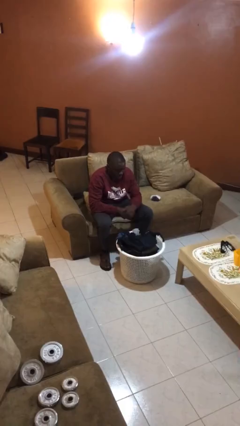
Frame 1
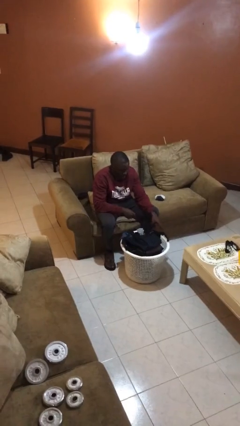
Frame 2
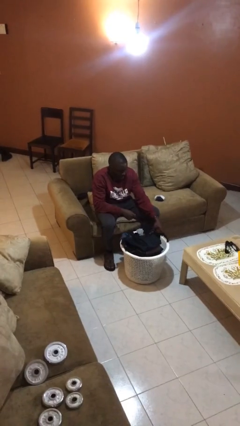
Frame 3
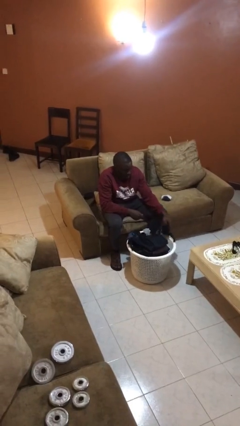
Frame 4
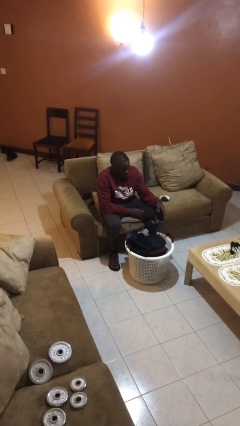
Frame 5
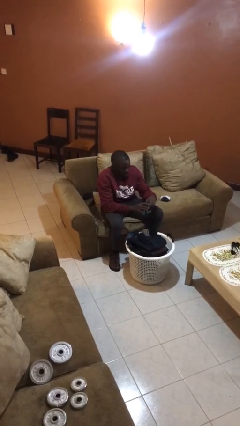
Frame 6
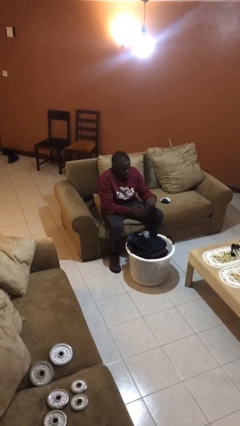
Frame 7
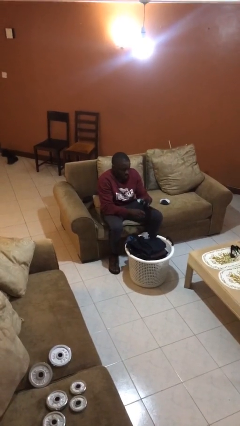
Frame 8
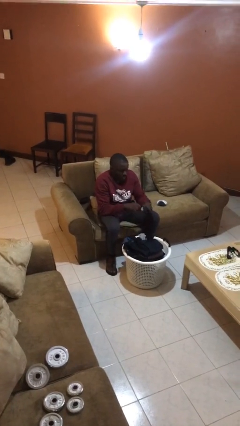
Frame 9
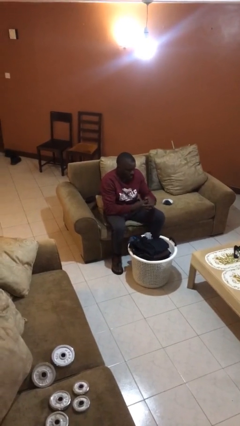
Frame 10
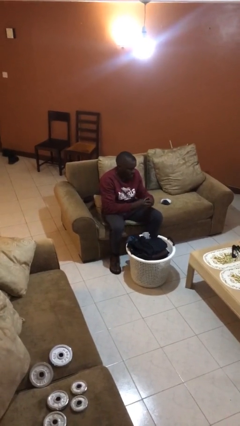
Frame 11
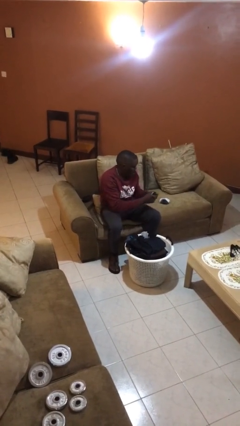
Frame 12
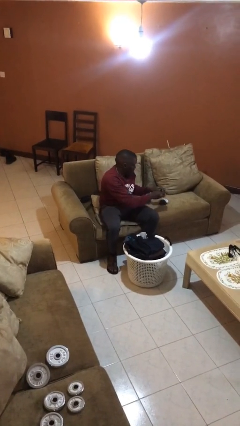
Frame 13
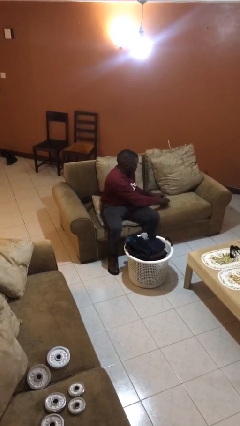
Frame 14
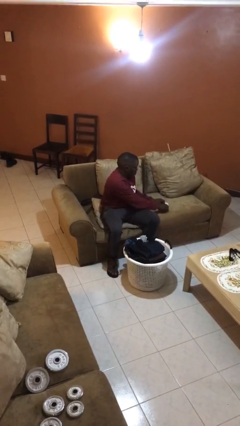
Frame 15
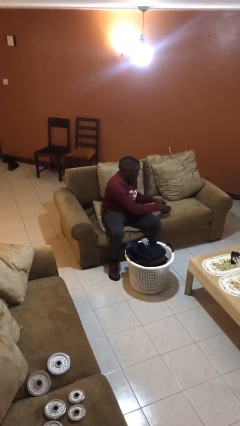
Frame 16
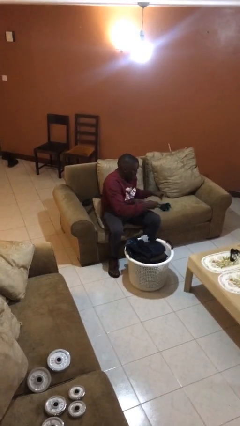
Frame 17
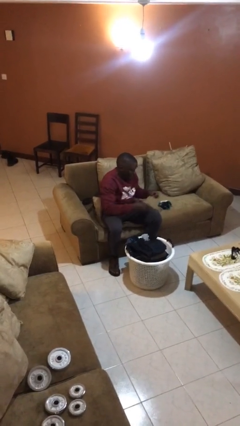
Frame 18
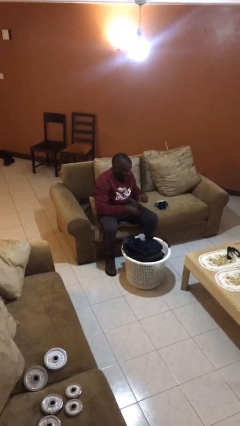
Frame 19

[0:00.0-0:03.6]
person folds socks

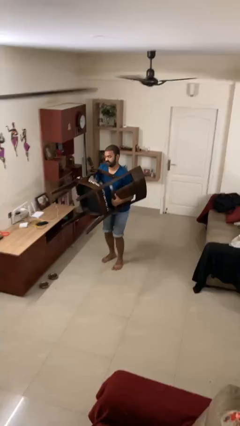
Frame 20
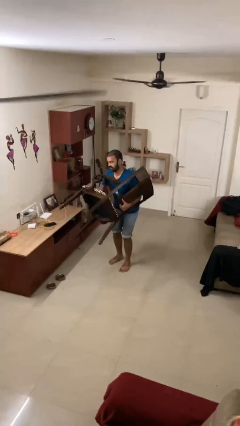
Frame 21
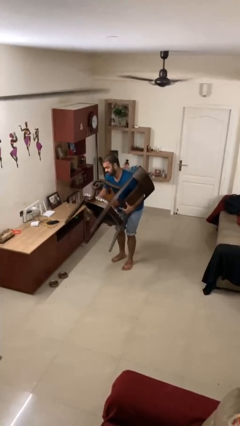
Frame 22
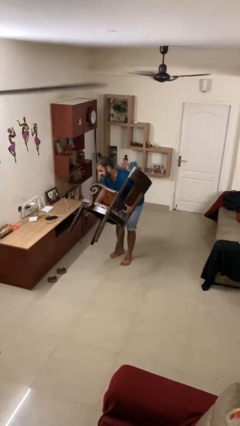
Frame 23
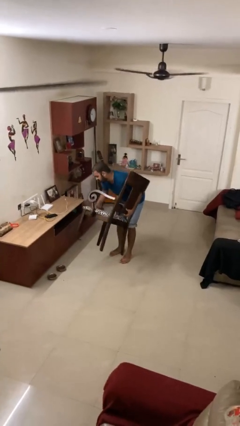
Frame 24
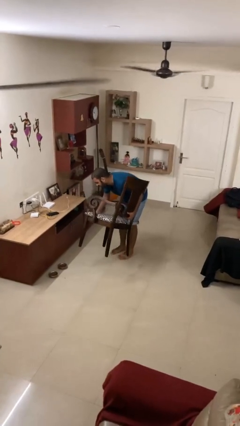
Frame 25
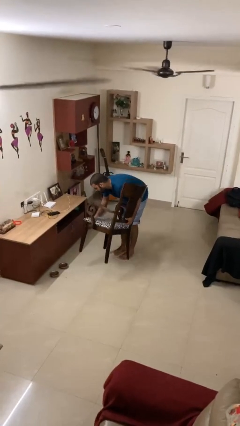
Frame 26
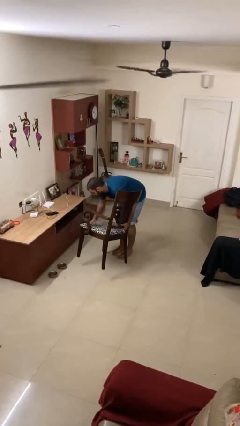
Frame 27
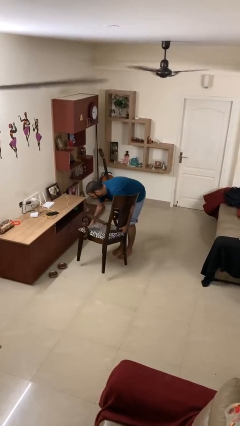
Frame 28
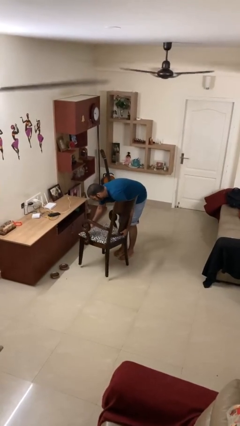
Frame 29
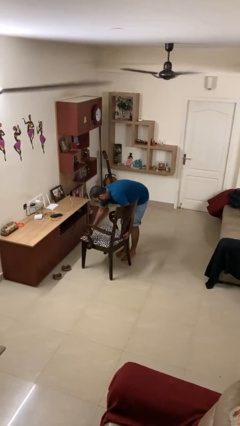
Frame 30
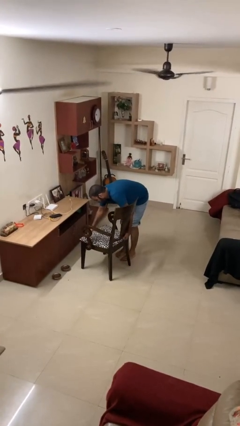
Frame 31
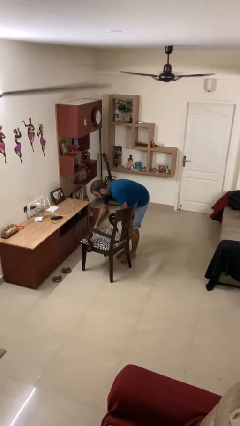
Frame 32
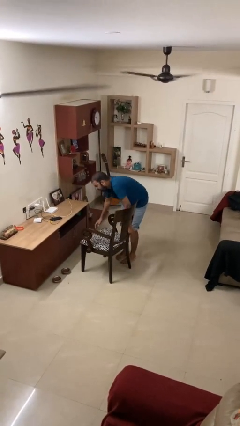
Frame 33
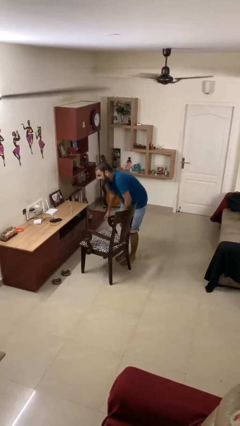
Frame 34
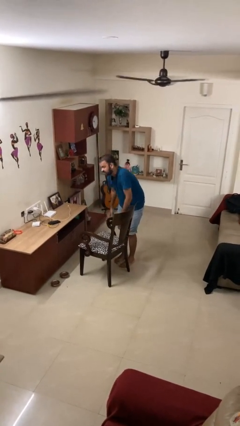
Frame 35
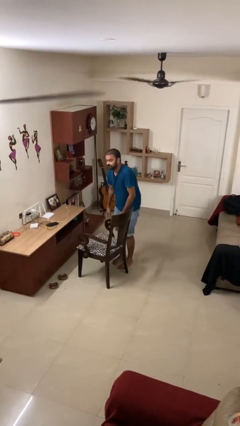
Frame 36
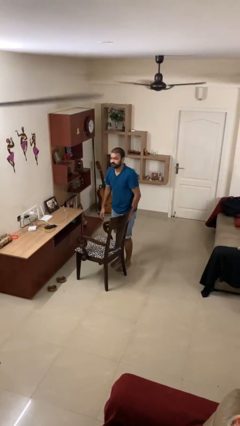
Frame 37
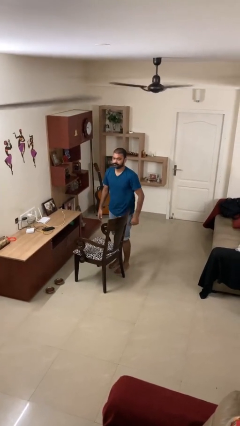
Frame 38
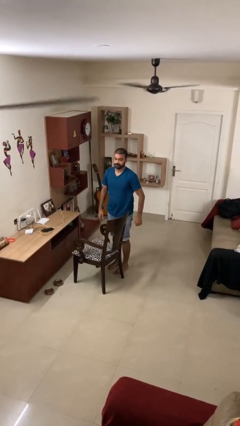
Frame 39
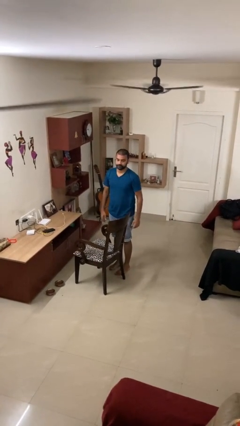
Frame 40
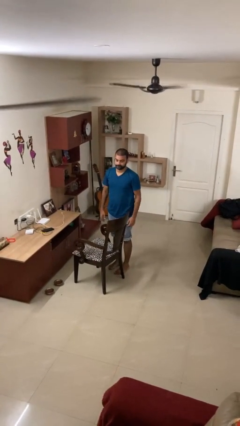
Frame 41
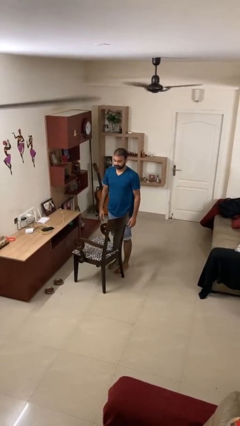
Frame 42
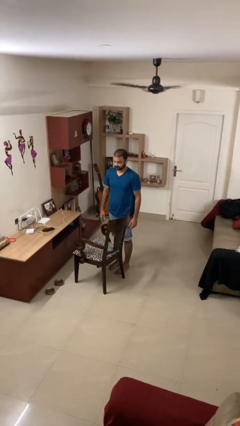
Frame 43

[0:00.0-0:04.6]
person puts down object on floor

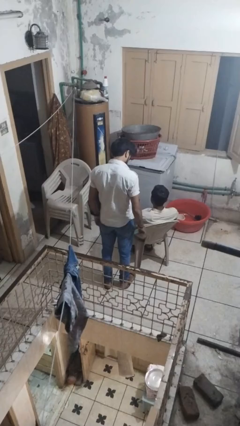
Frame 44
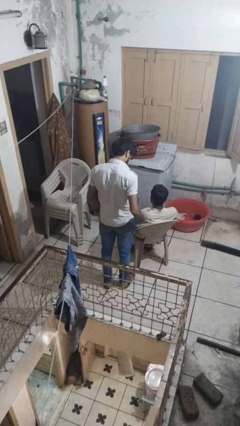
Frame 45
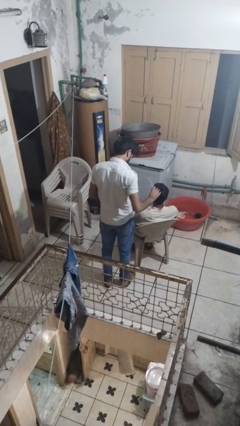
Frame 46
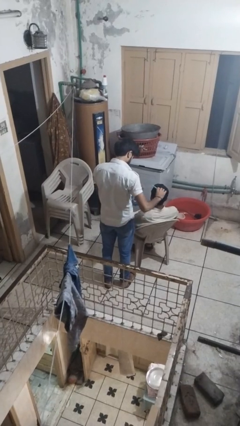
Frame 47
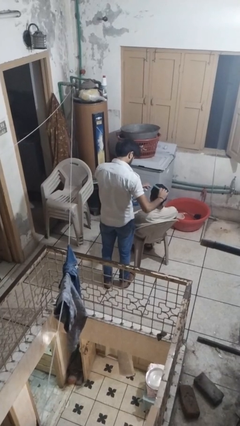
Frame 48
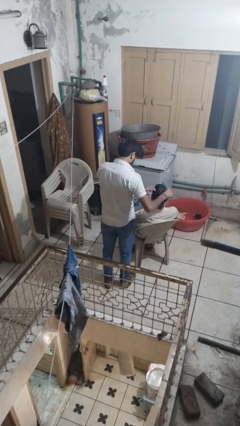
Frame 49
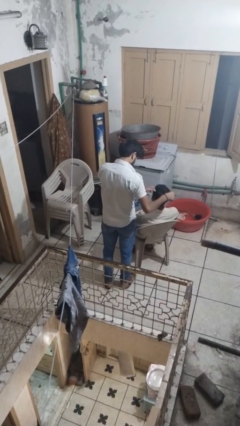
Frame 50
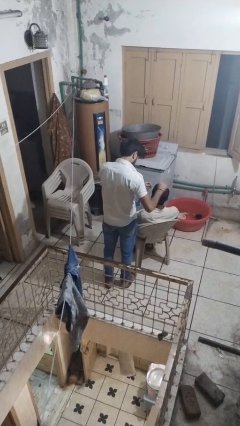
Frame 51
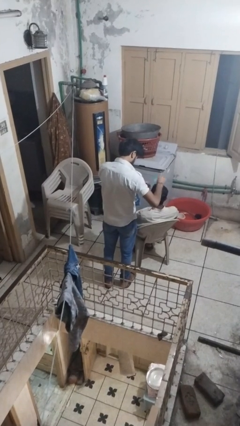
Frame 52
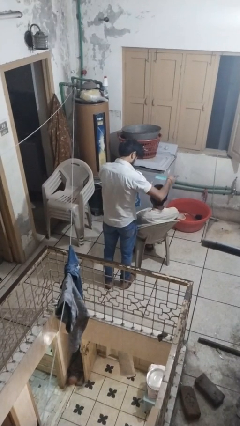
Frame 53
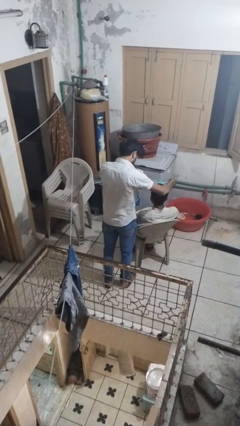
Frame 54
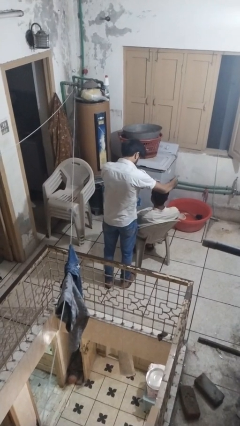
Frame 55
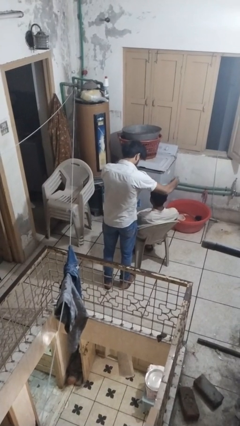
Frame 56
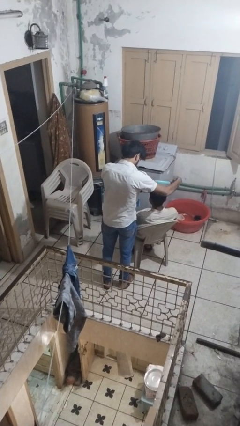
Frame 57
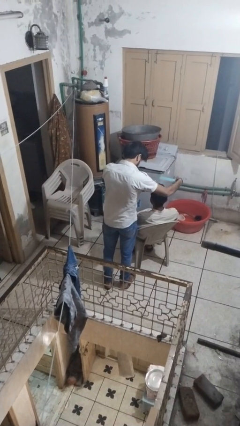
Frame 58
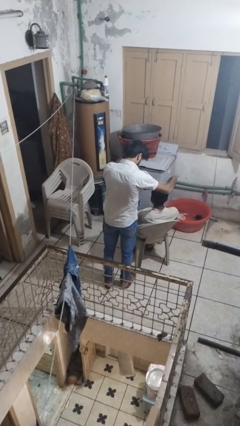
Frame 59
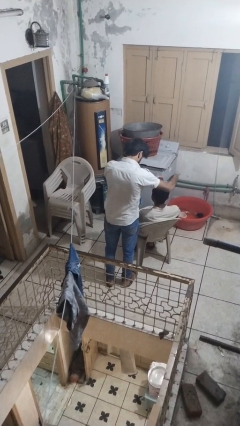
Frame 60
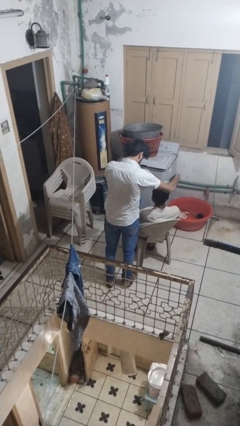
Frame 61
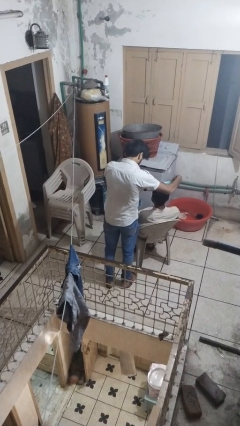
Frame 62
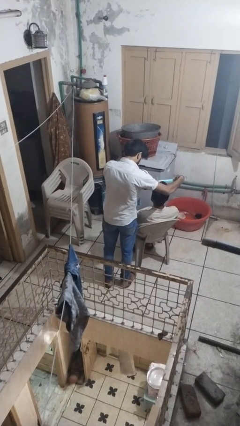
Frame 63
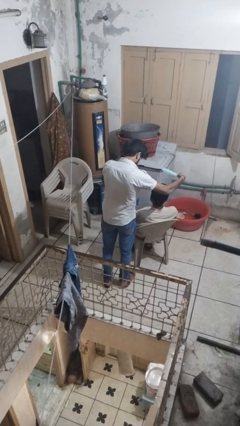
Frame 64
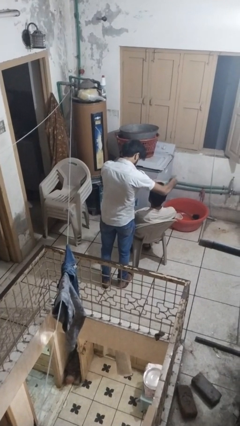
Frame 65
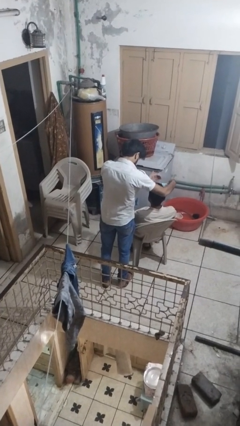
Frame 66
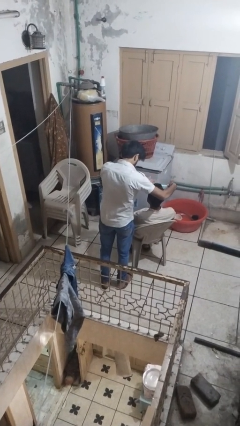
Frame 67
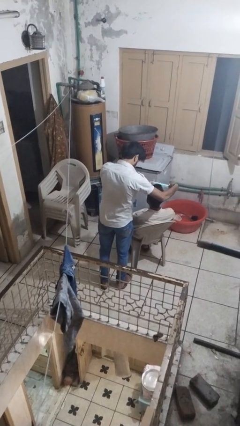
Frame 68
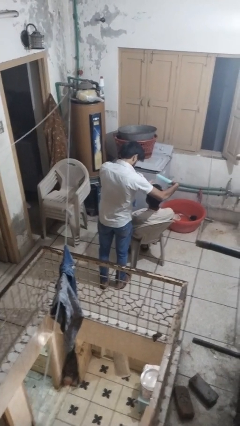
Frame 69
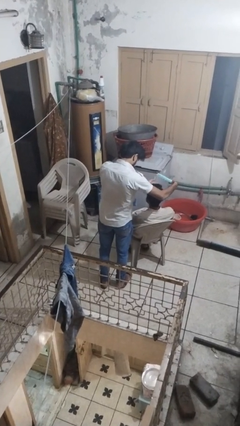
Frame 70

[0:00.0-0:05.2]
person brushes hair of person

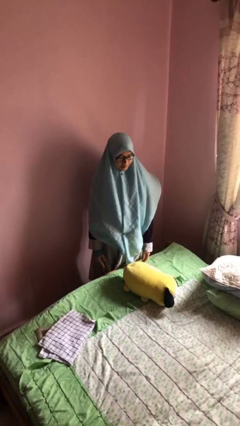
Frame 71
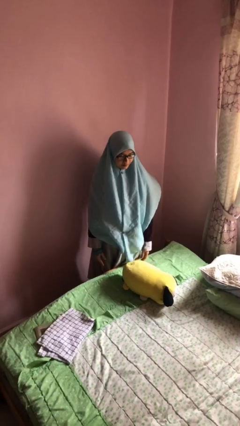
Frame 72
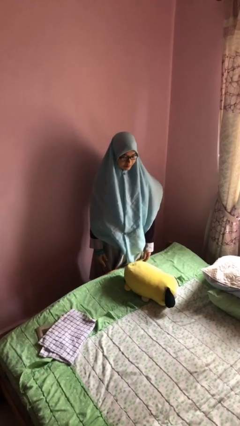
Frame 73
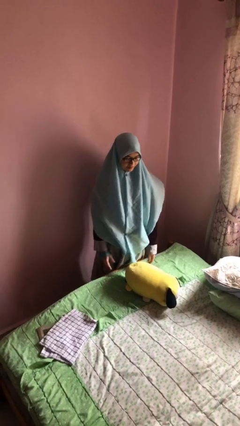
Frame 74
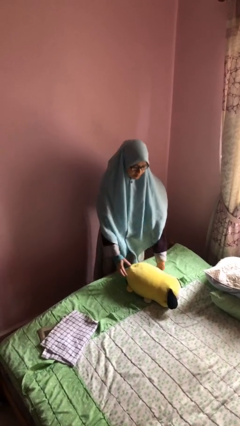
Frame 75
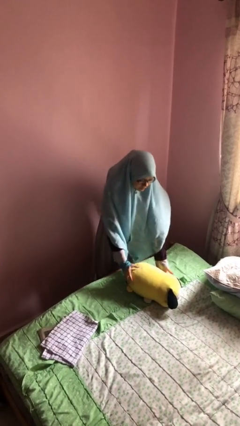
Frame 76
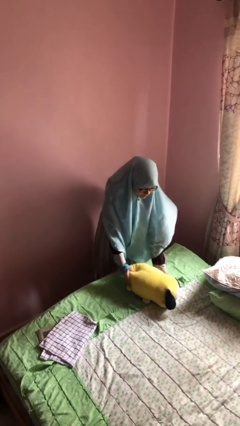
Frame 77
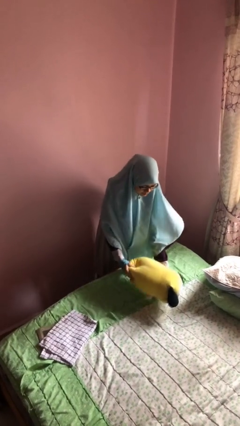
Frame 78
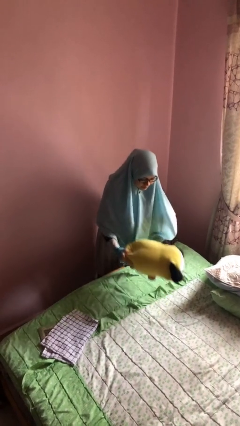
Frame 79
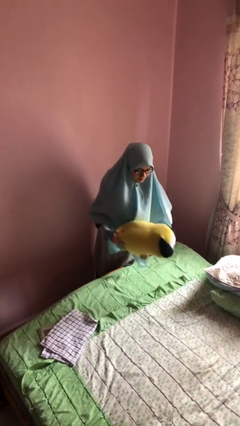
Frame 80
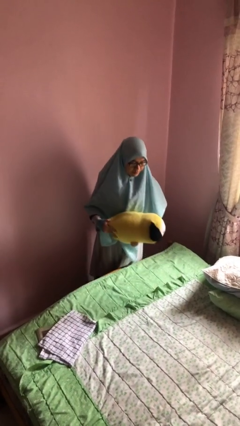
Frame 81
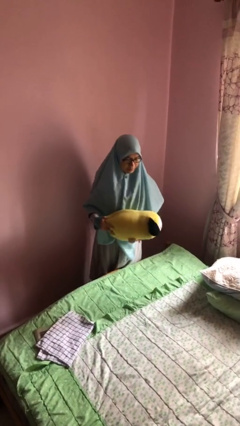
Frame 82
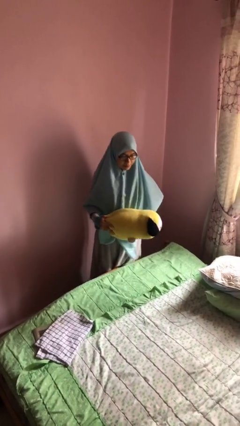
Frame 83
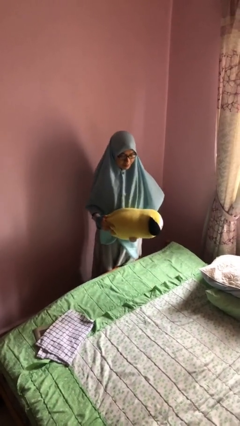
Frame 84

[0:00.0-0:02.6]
person picks up object from bed

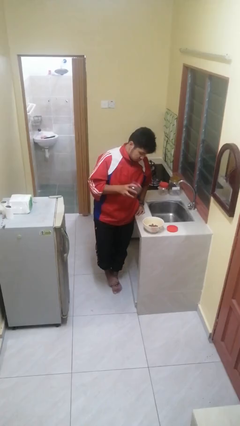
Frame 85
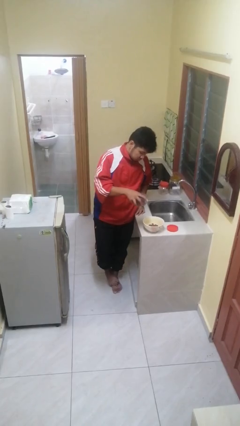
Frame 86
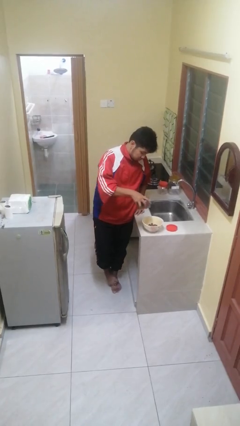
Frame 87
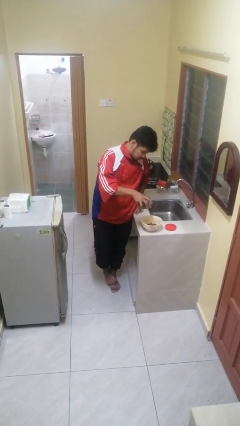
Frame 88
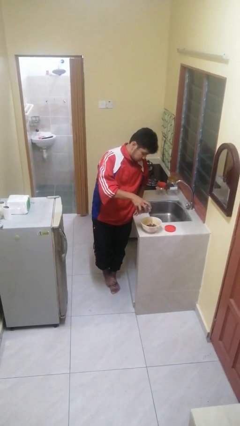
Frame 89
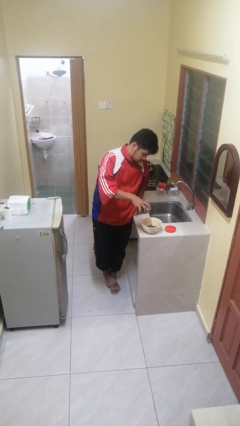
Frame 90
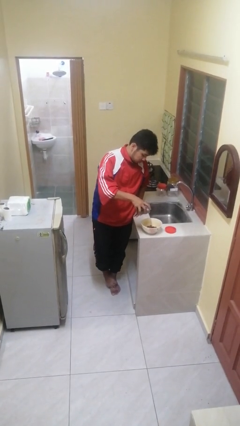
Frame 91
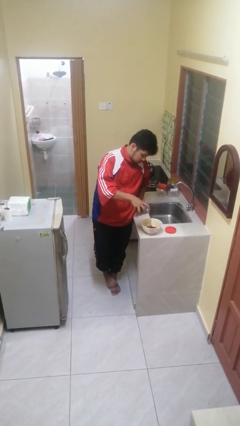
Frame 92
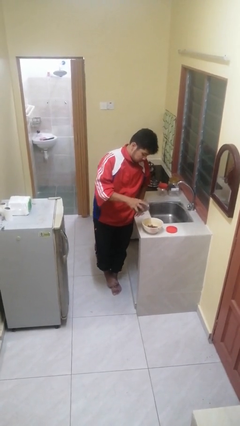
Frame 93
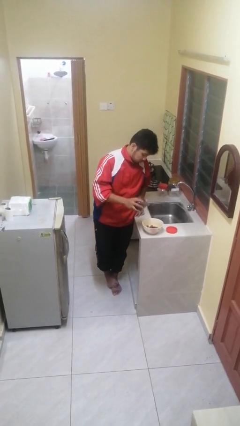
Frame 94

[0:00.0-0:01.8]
person pours into bowl
